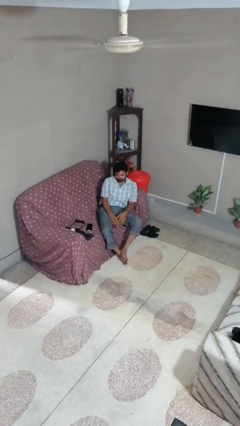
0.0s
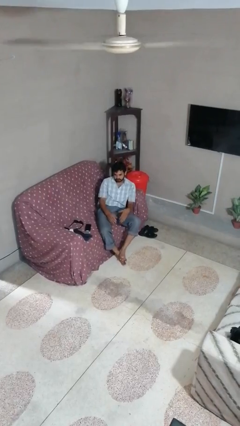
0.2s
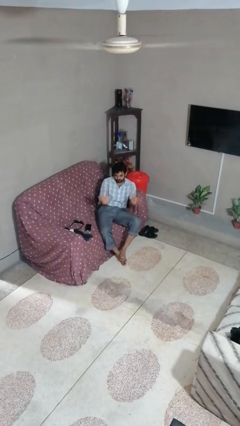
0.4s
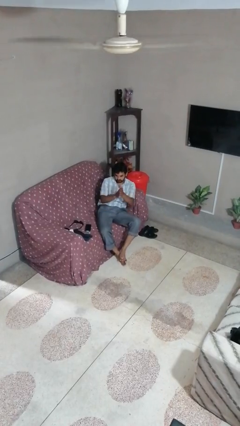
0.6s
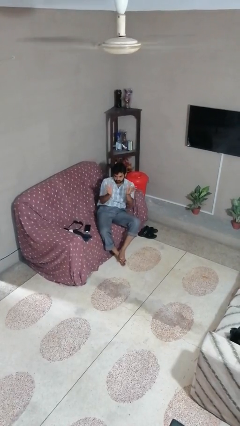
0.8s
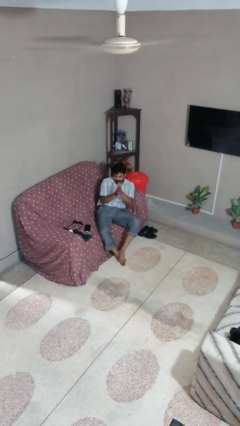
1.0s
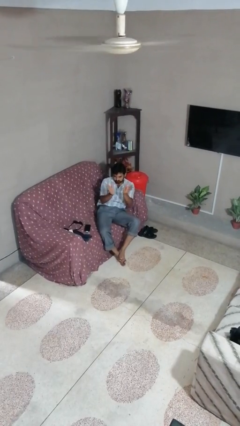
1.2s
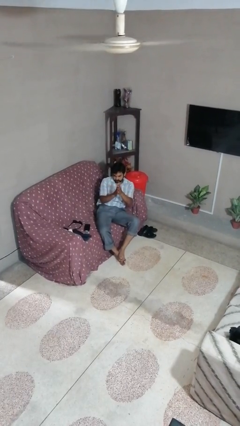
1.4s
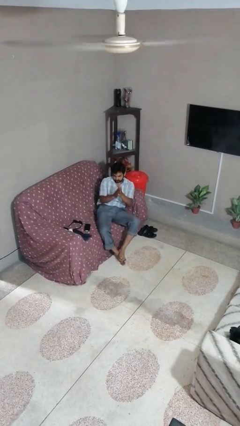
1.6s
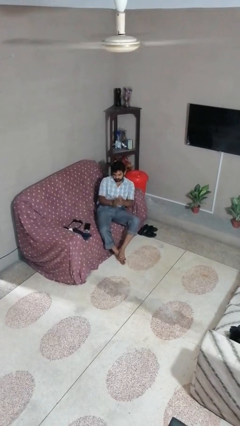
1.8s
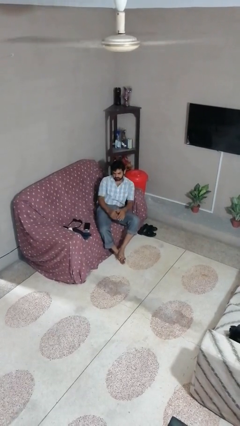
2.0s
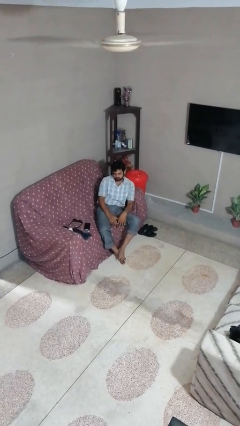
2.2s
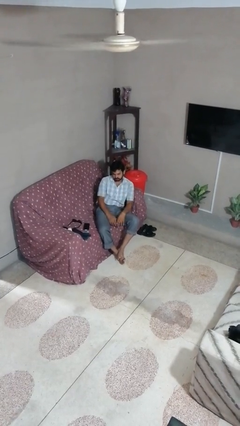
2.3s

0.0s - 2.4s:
person claps hands

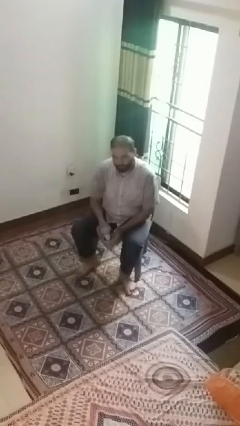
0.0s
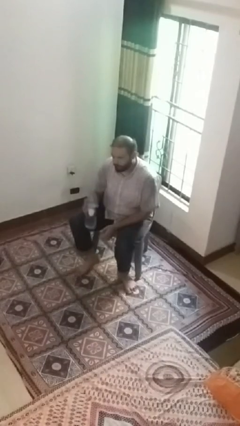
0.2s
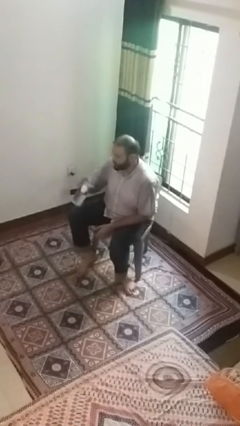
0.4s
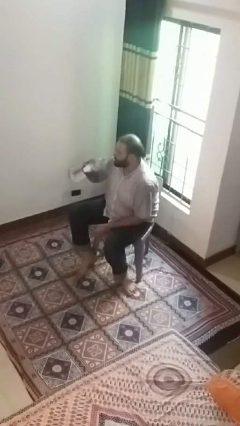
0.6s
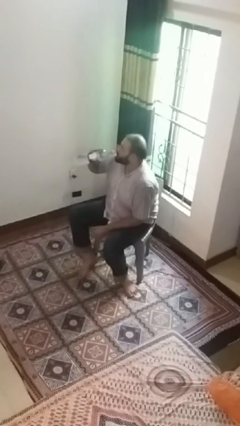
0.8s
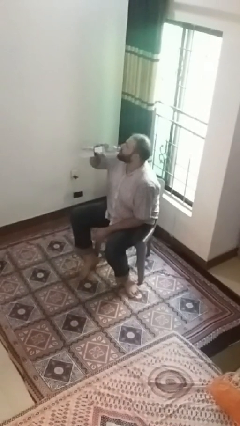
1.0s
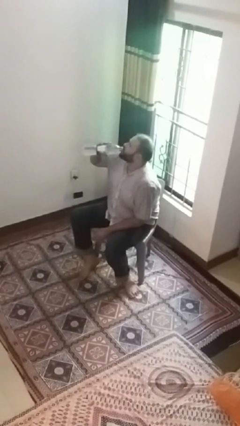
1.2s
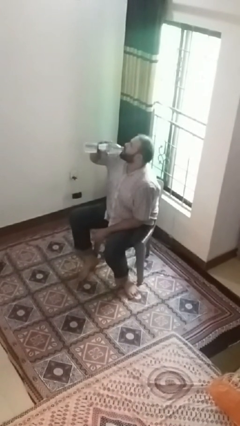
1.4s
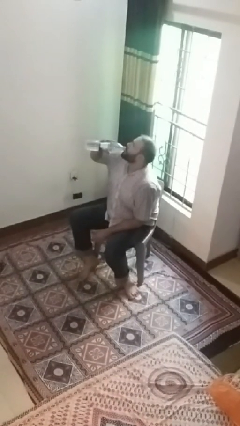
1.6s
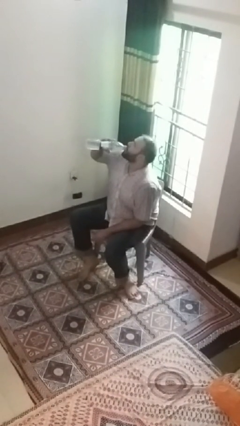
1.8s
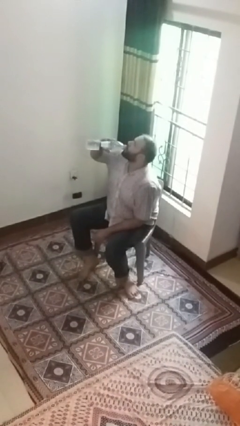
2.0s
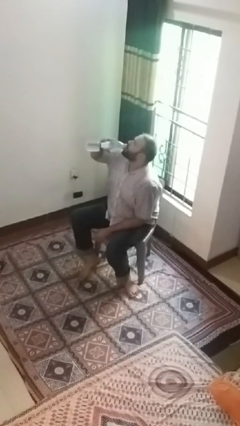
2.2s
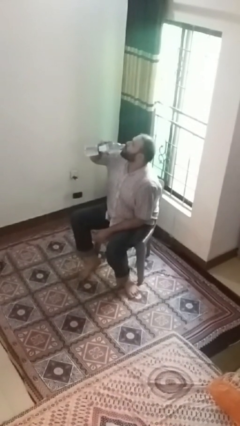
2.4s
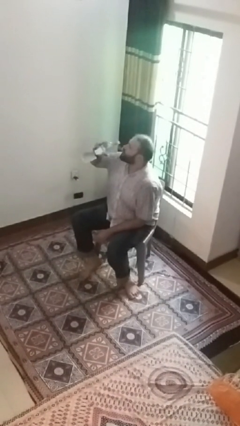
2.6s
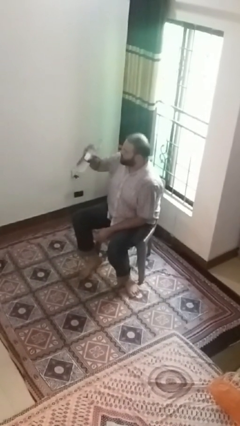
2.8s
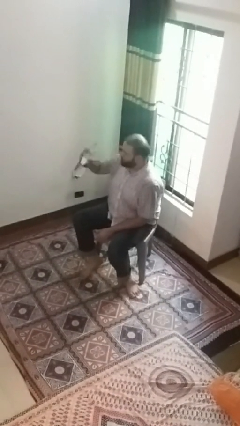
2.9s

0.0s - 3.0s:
person drinks from bottle

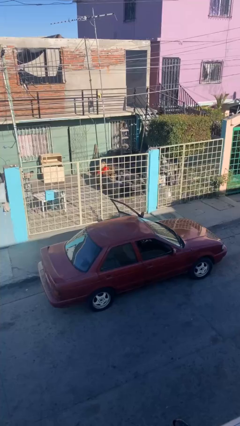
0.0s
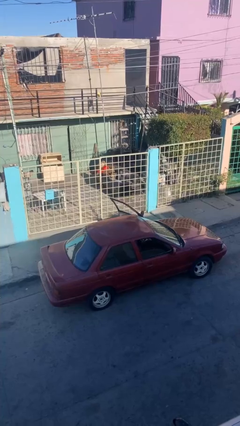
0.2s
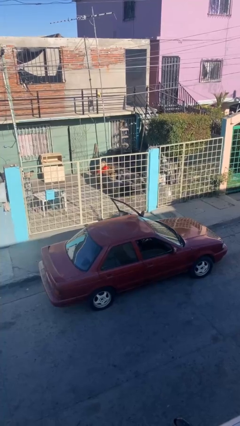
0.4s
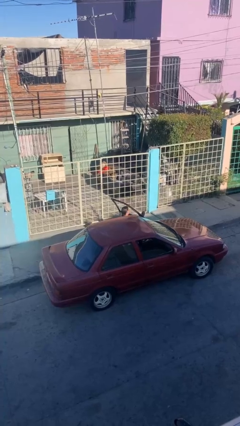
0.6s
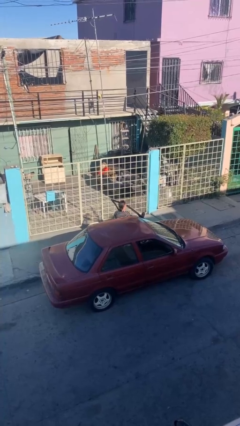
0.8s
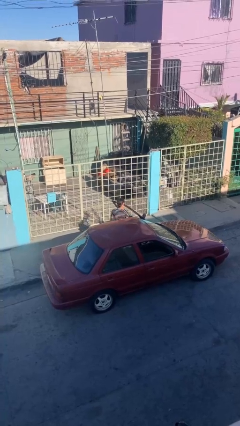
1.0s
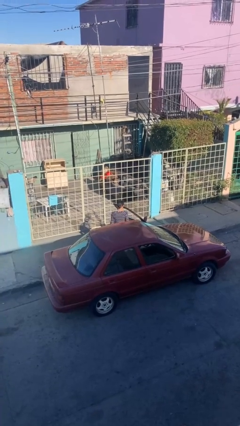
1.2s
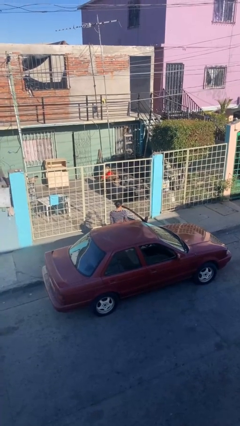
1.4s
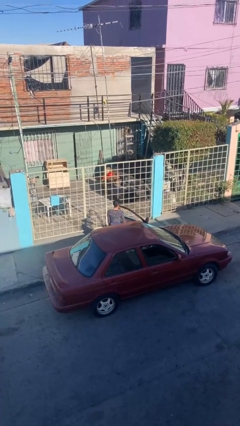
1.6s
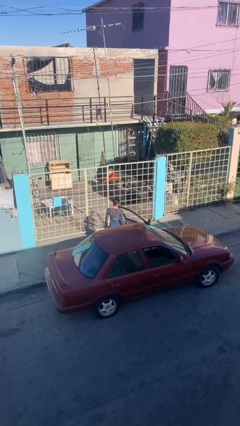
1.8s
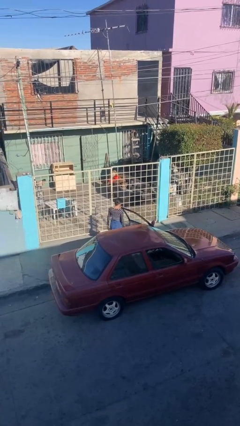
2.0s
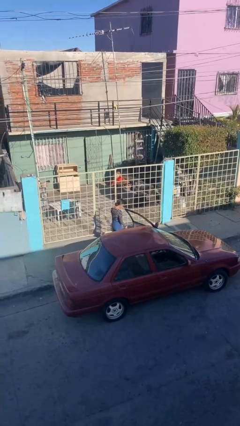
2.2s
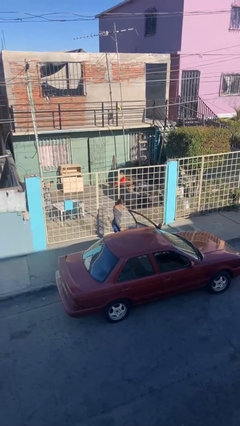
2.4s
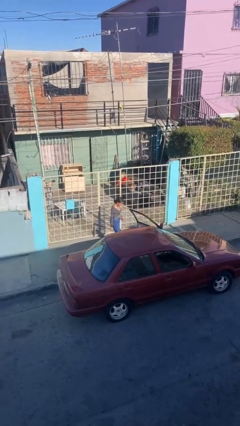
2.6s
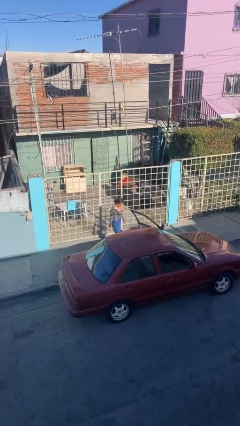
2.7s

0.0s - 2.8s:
person exits car

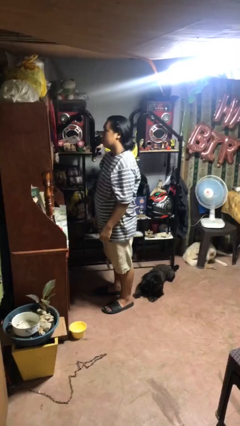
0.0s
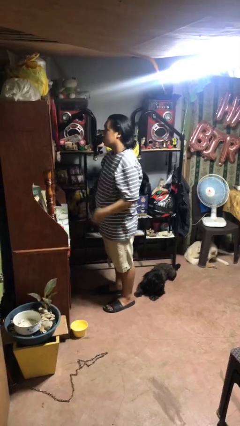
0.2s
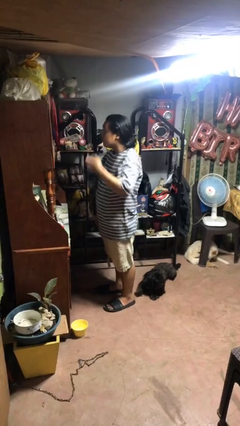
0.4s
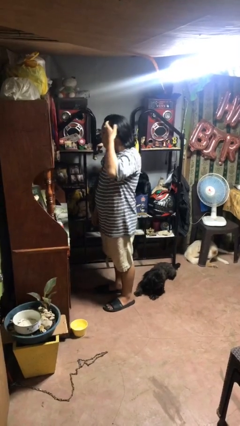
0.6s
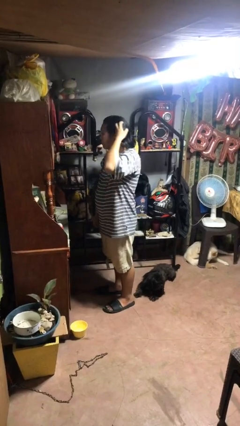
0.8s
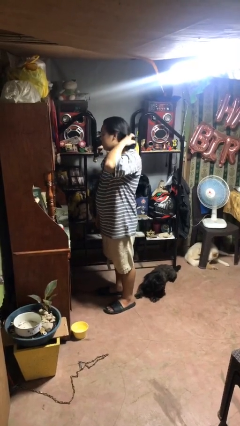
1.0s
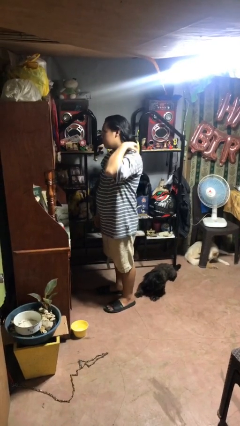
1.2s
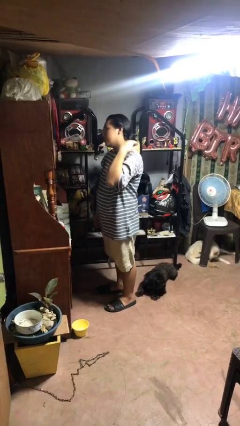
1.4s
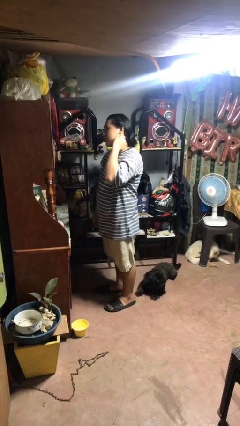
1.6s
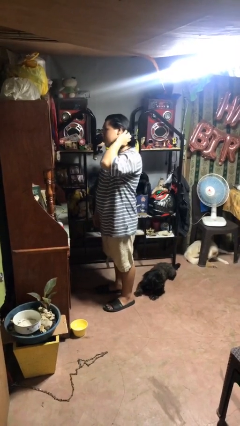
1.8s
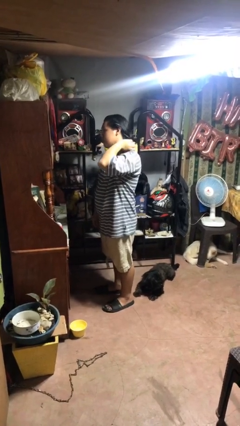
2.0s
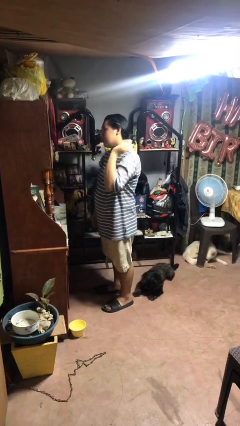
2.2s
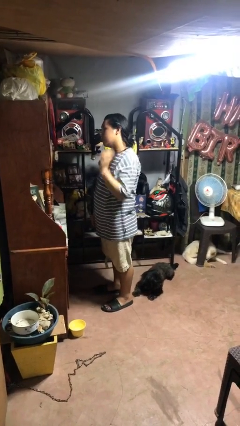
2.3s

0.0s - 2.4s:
person strokes hair

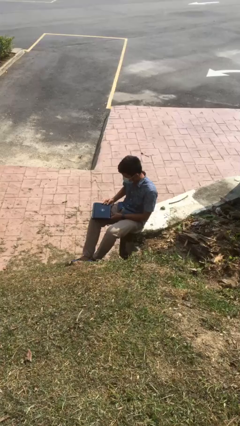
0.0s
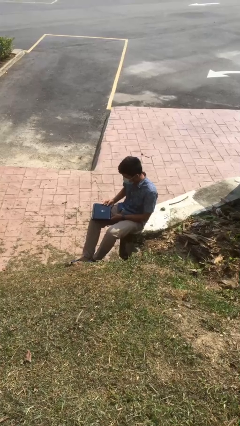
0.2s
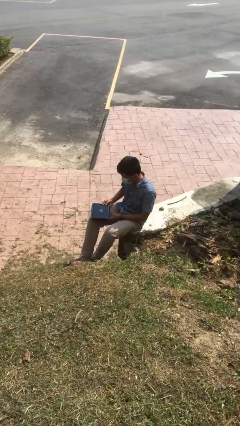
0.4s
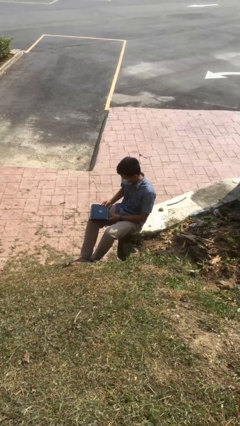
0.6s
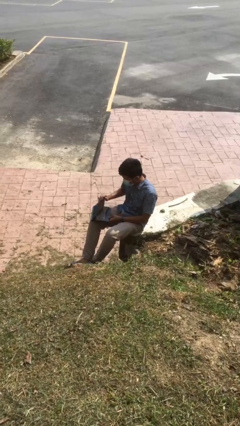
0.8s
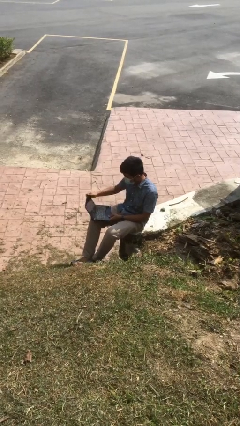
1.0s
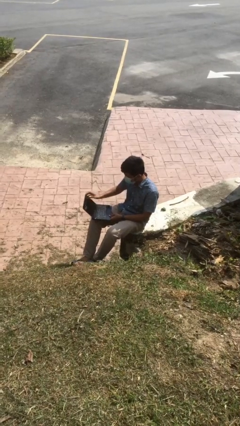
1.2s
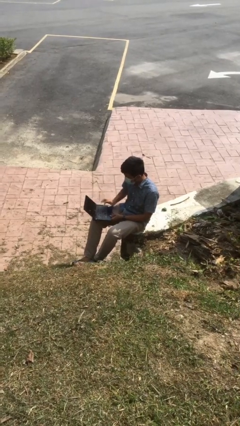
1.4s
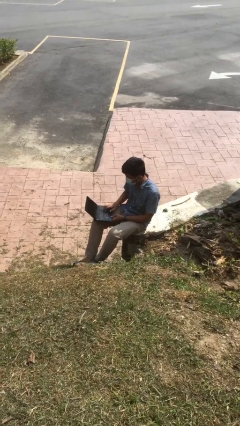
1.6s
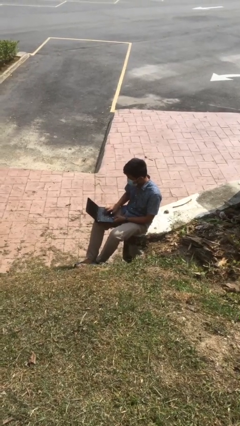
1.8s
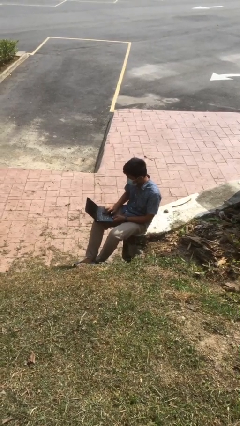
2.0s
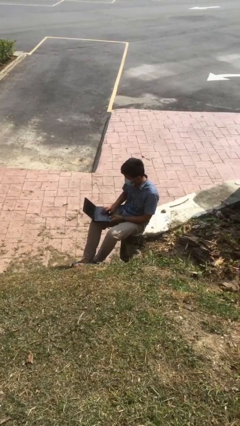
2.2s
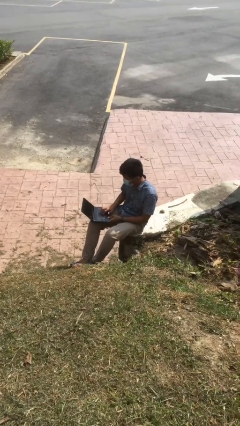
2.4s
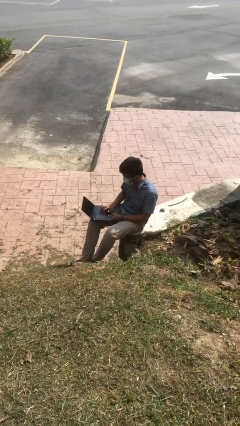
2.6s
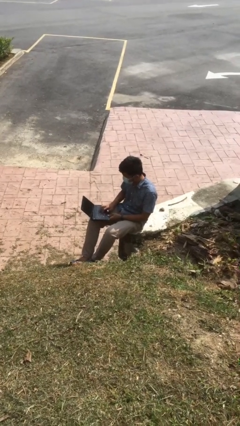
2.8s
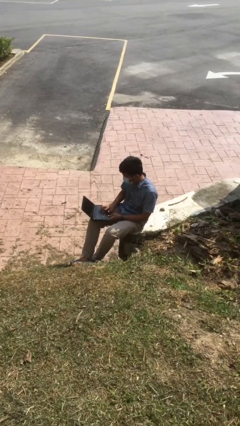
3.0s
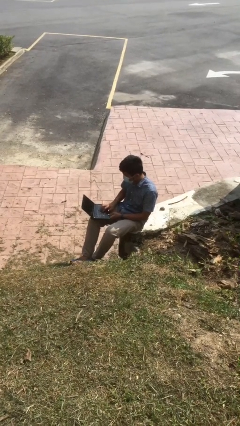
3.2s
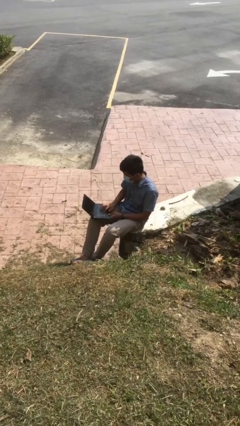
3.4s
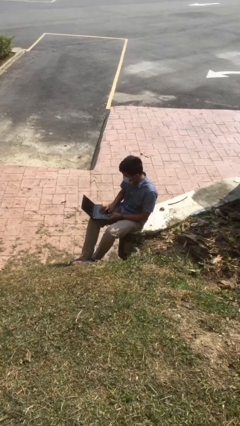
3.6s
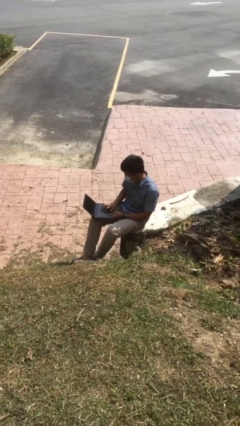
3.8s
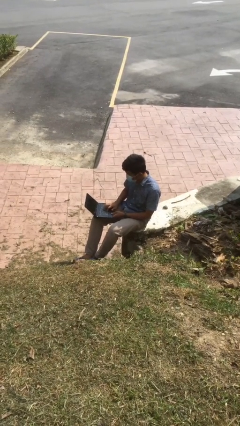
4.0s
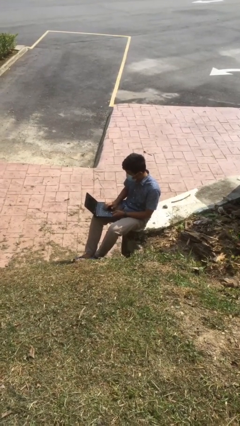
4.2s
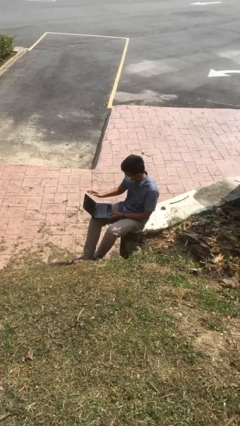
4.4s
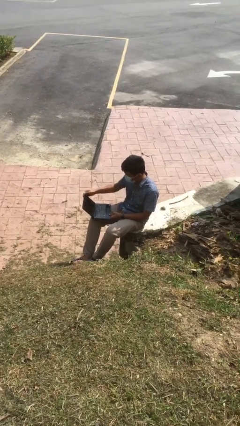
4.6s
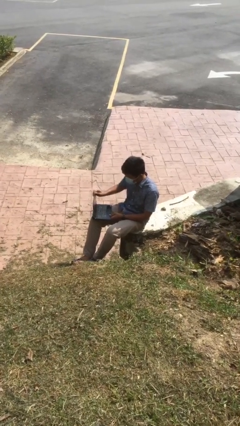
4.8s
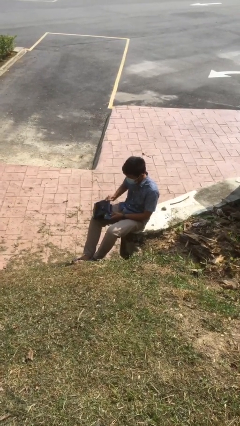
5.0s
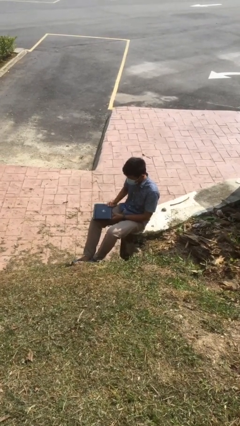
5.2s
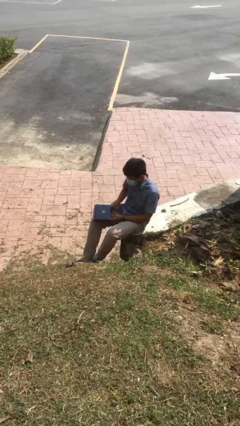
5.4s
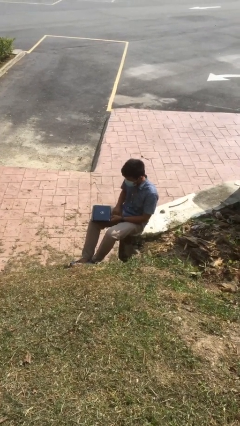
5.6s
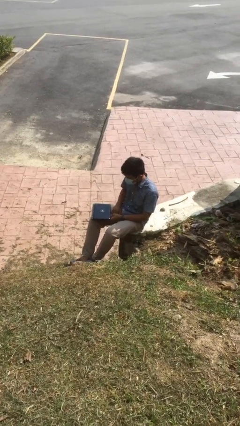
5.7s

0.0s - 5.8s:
person interacts with laptop

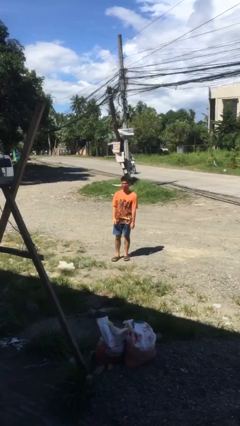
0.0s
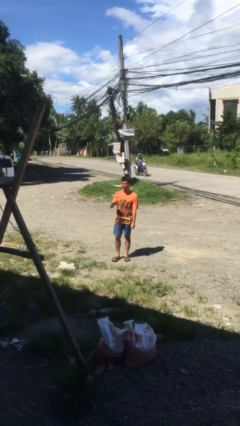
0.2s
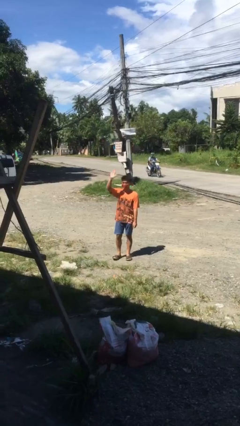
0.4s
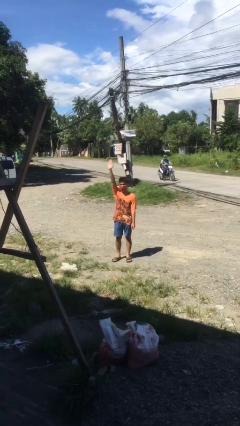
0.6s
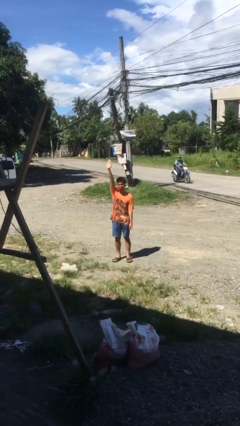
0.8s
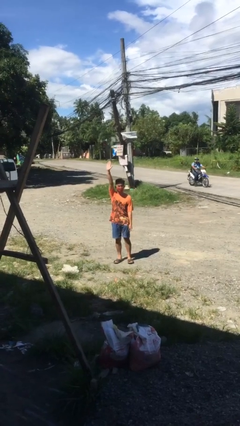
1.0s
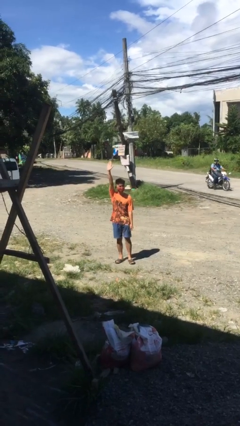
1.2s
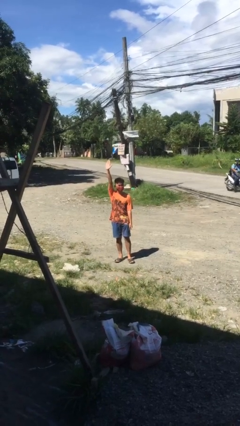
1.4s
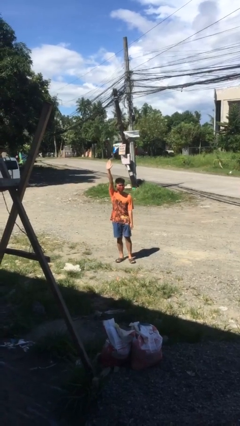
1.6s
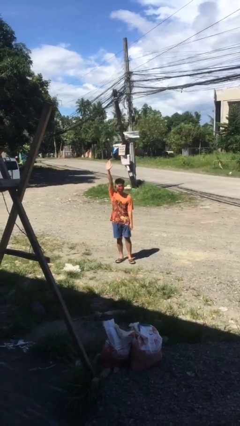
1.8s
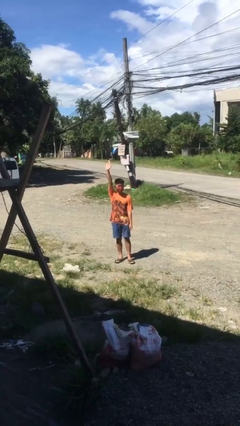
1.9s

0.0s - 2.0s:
person gestures raise hand
